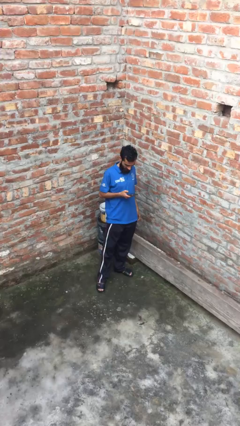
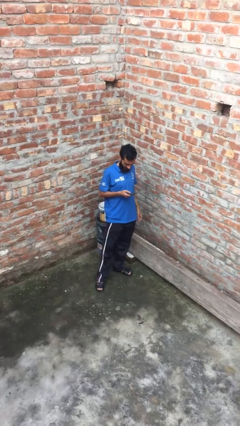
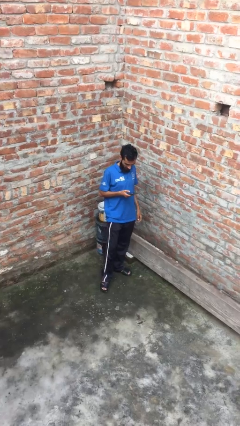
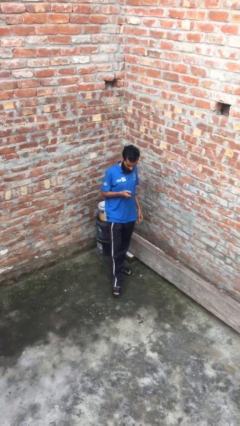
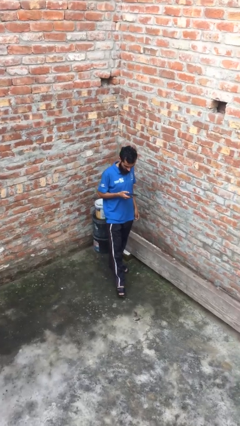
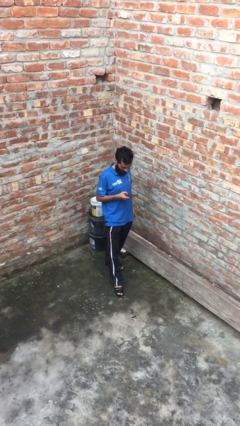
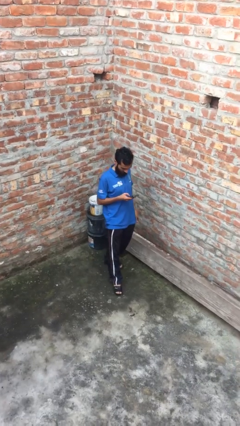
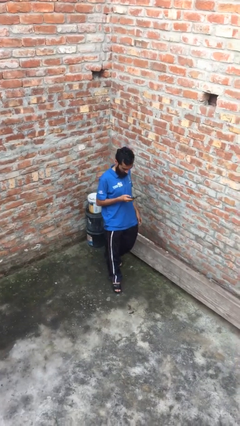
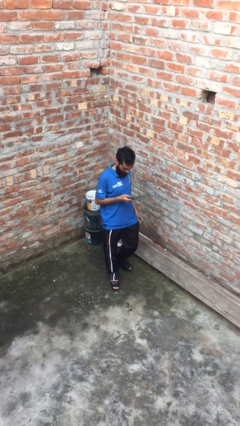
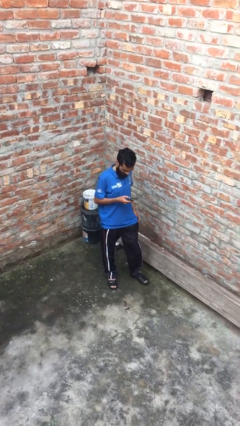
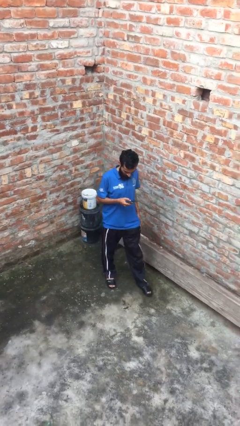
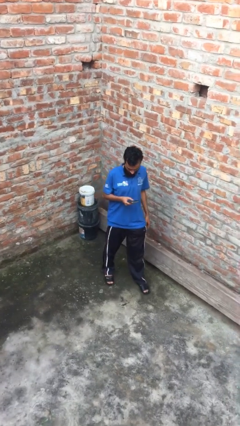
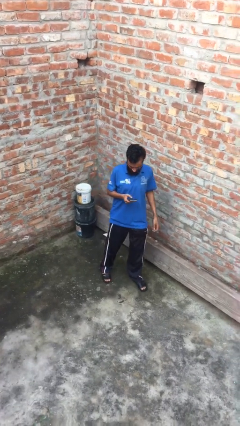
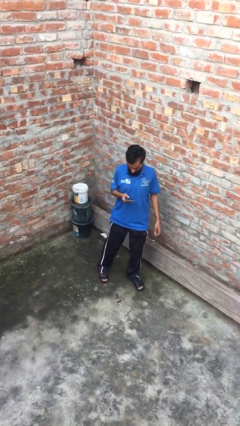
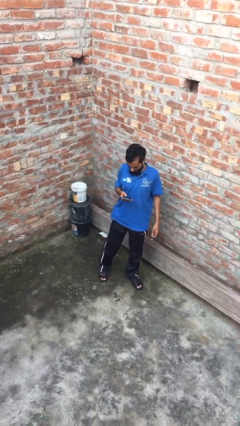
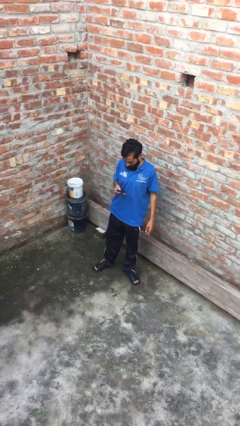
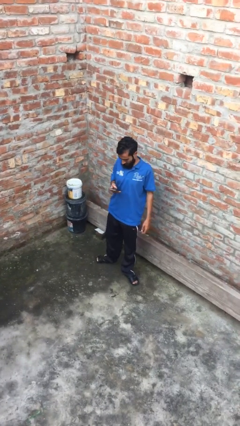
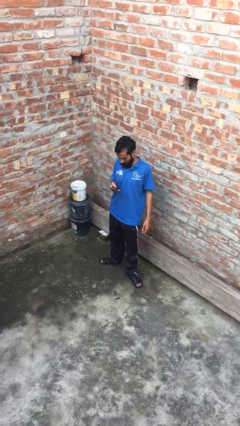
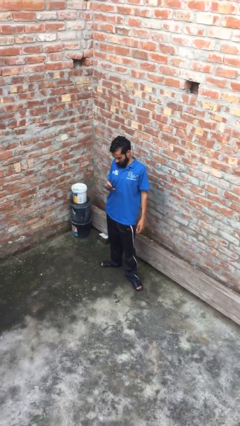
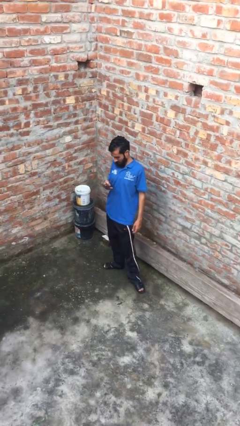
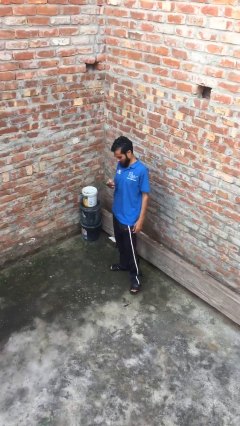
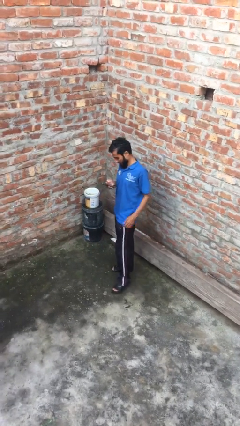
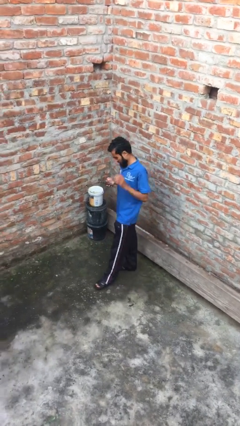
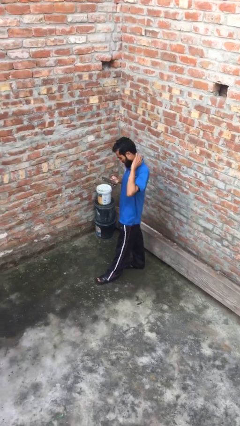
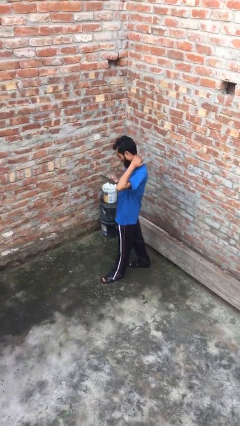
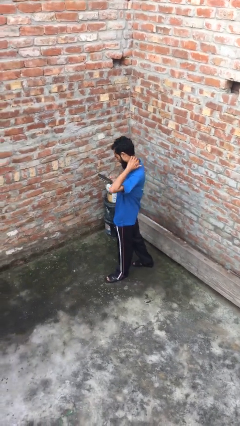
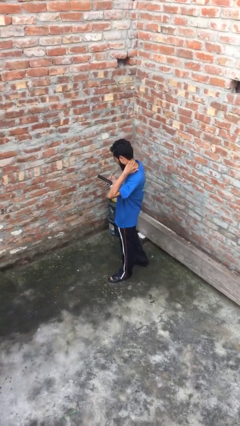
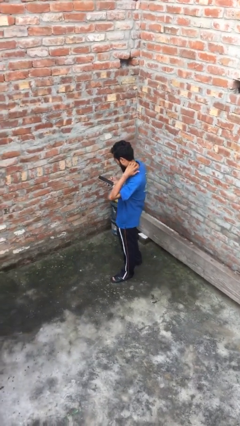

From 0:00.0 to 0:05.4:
person texts on phone

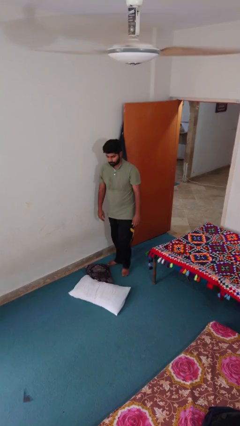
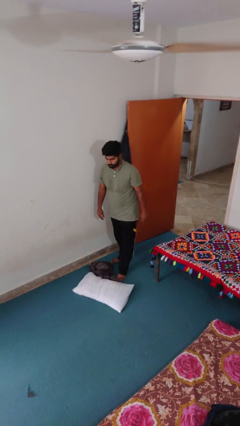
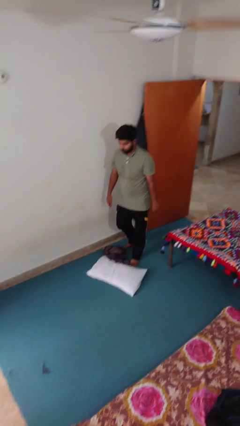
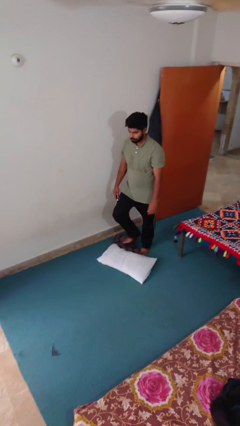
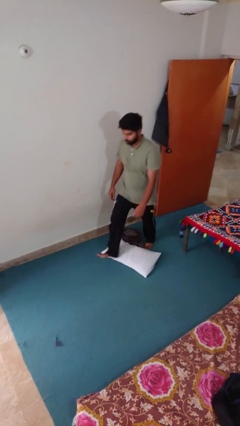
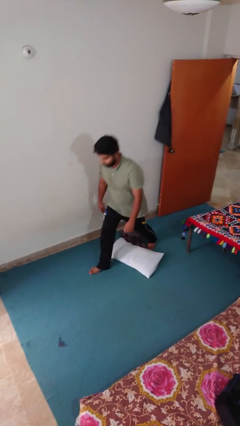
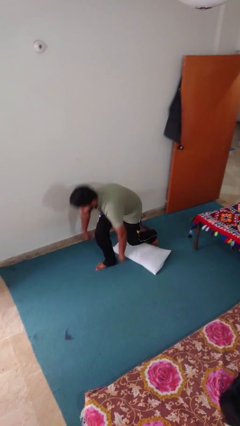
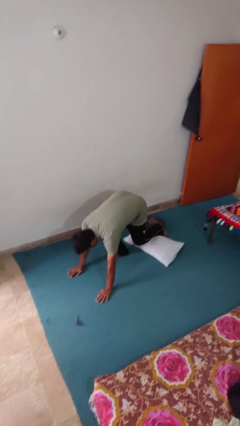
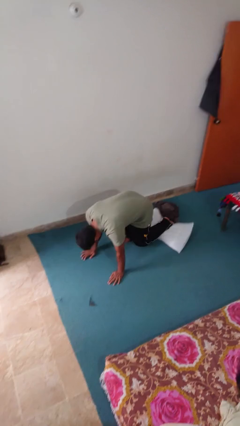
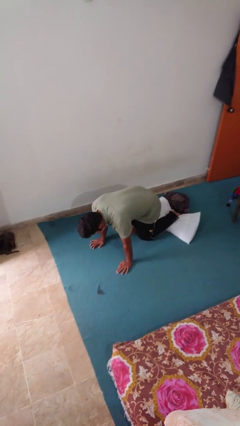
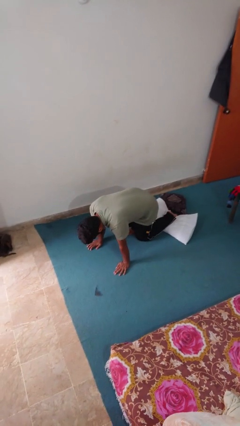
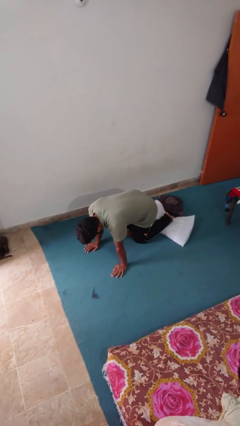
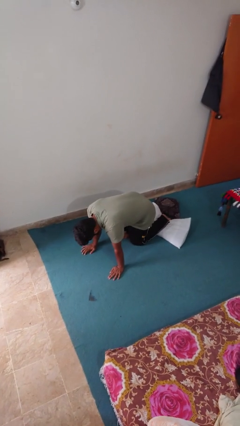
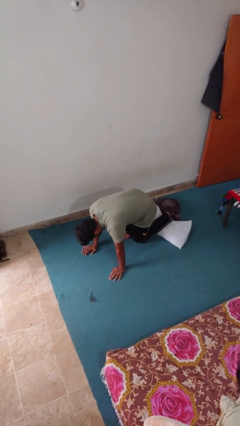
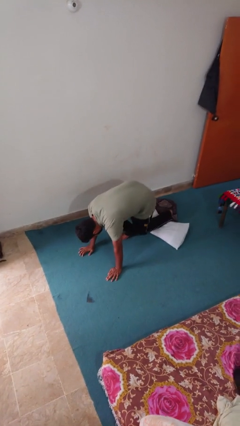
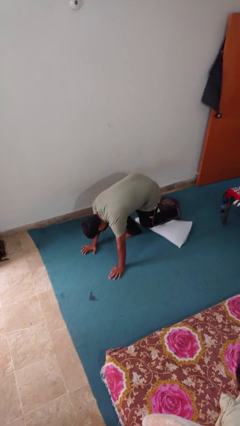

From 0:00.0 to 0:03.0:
person trips on object on floor

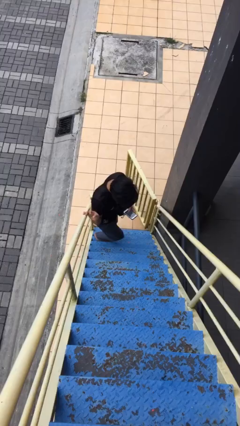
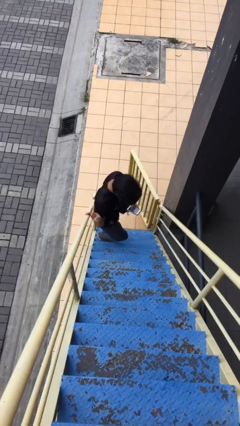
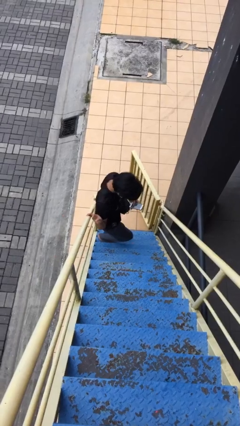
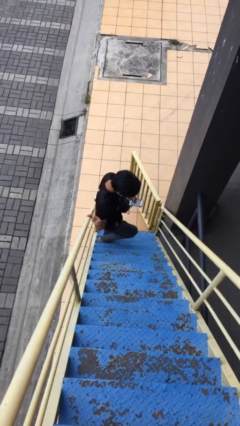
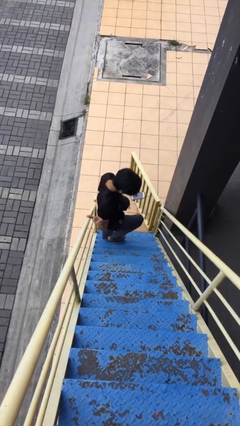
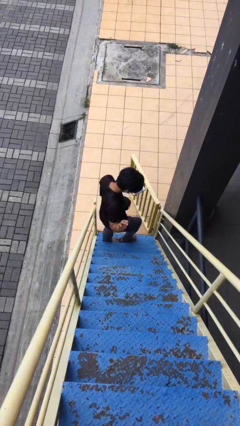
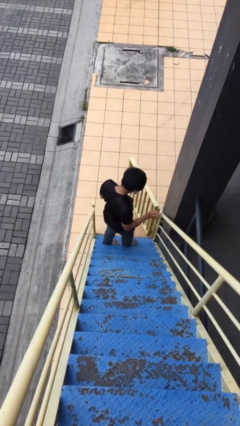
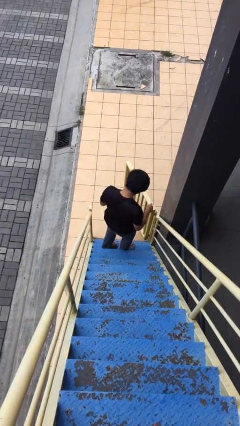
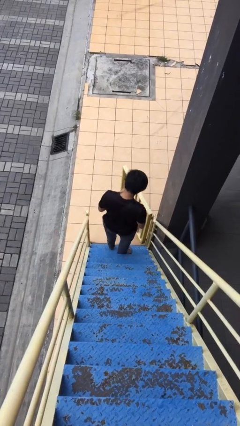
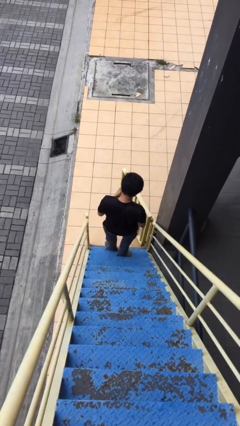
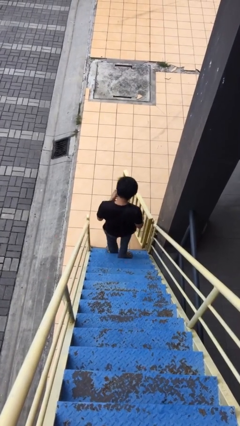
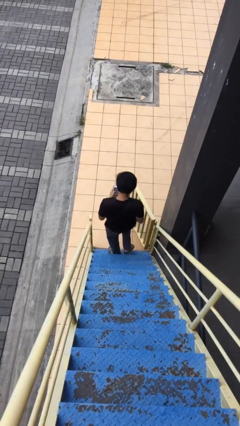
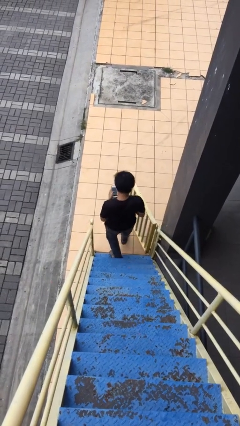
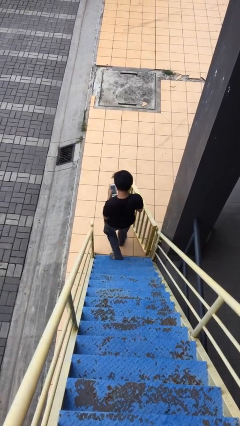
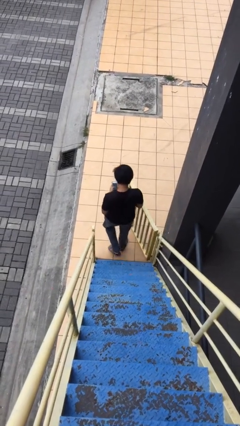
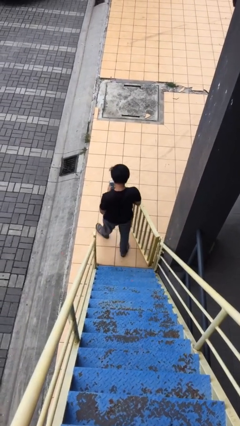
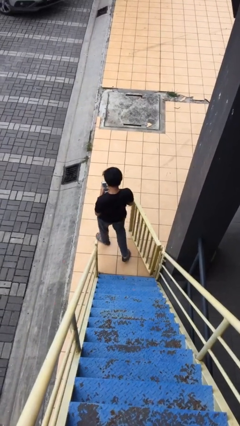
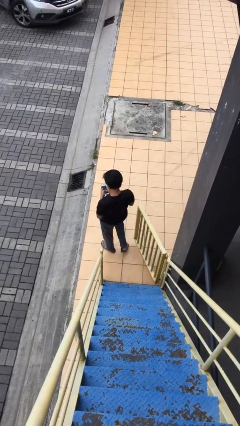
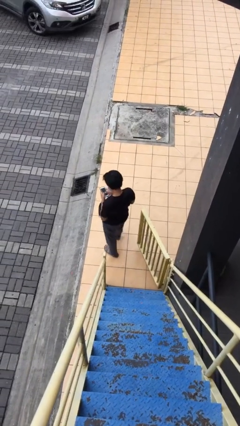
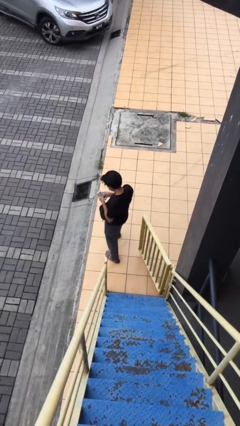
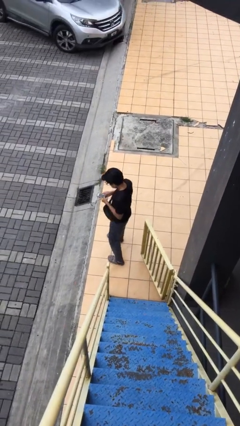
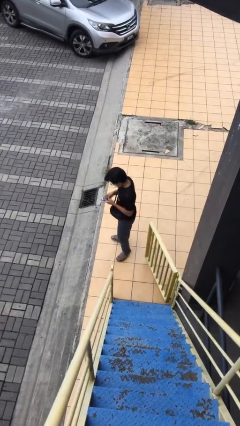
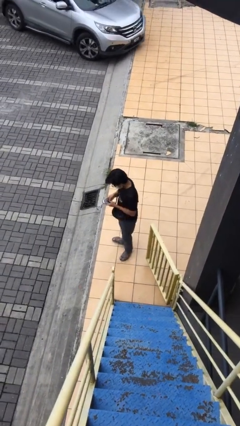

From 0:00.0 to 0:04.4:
person exits scene through structure

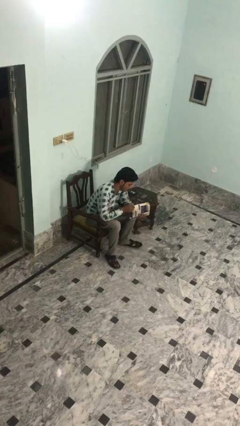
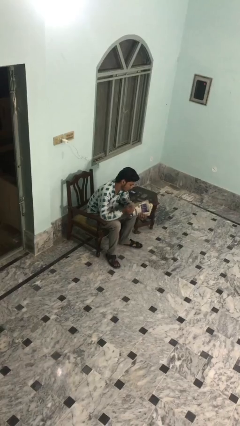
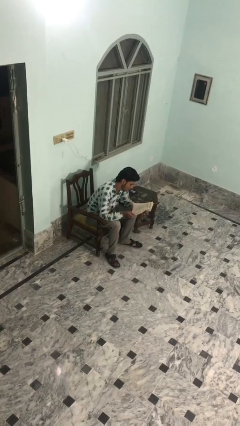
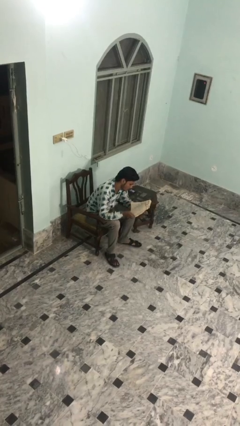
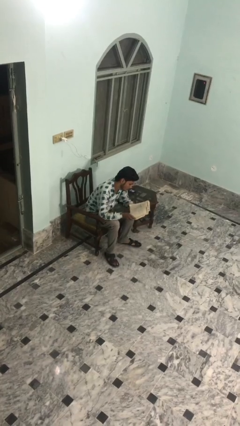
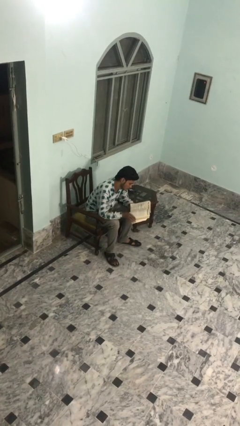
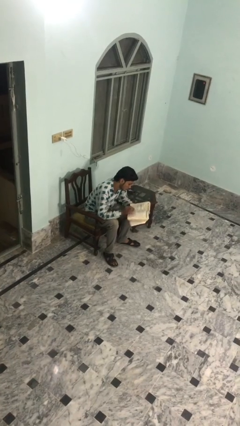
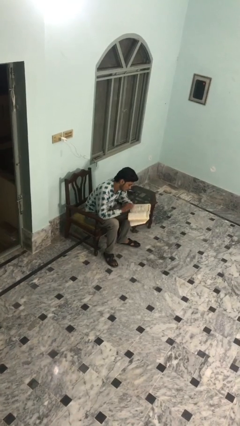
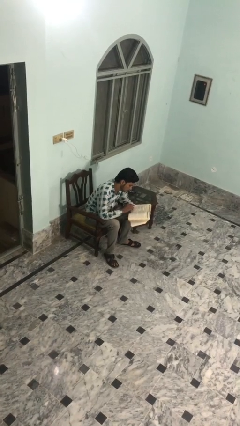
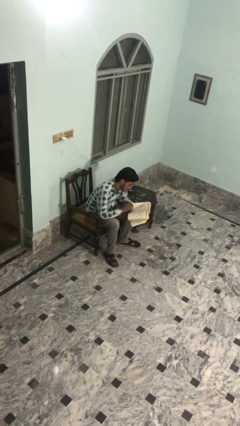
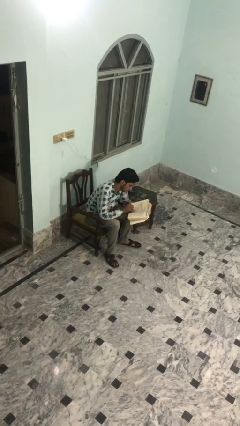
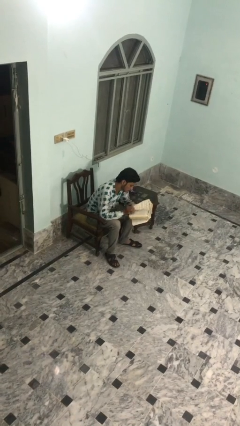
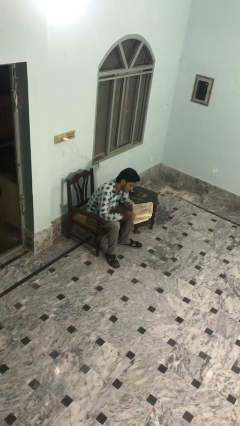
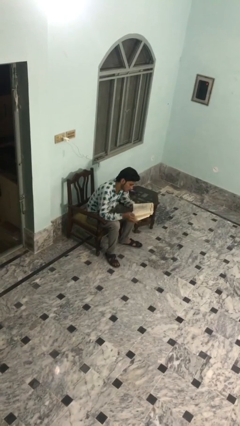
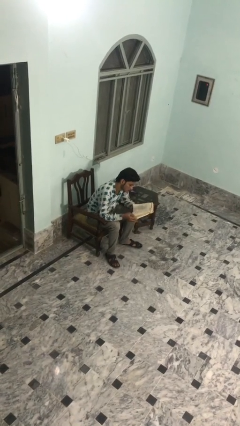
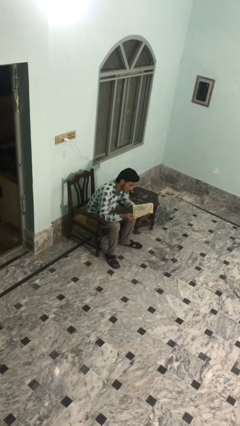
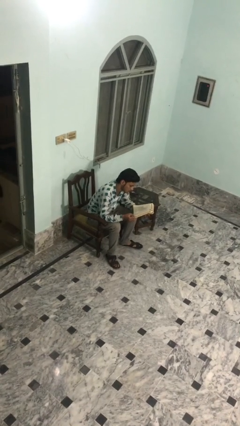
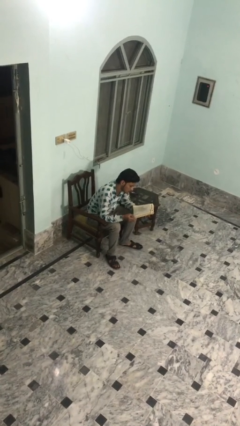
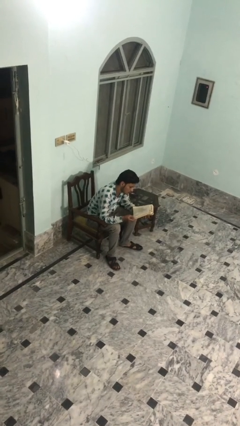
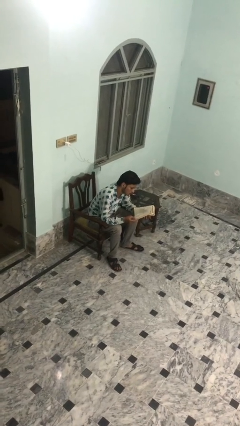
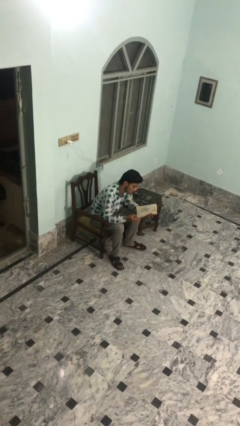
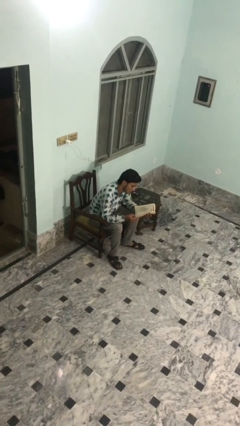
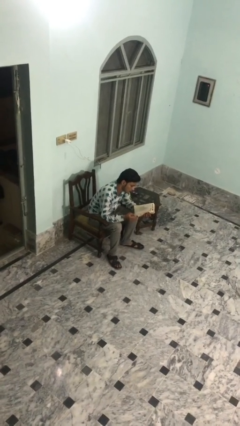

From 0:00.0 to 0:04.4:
person reads document

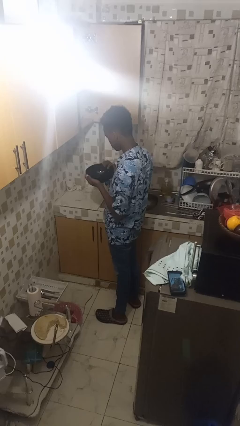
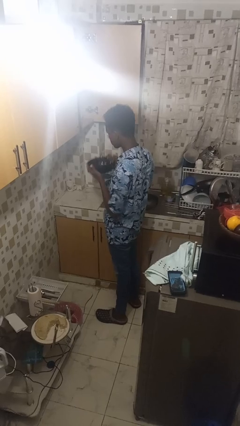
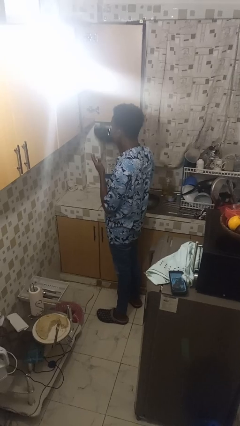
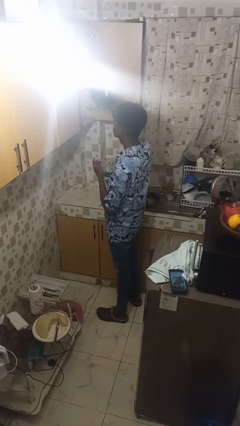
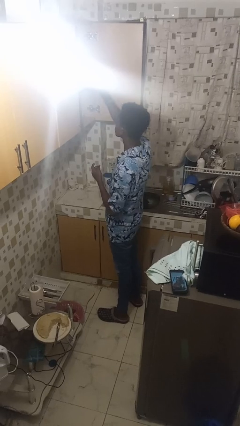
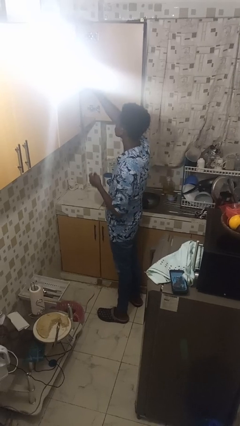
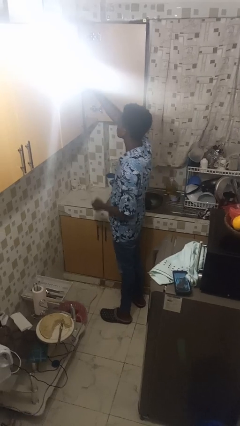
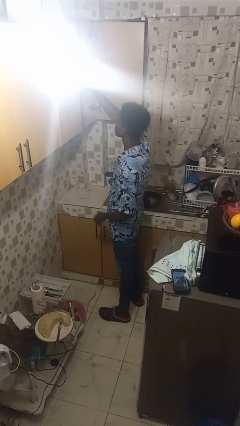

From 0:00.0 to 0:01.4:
person puts down object into cabinet
